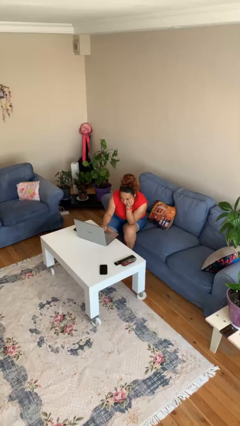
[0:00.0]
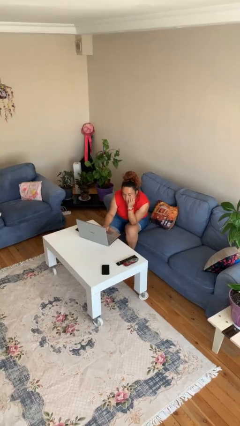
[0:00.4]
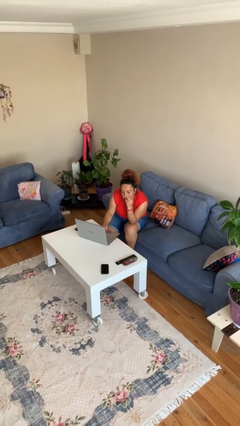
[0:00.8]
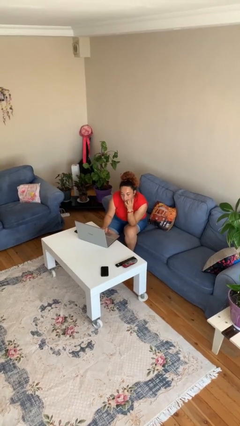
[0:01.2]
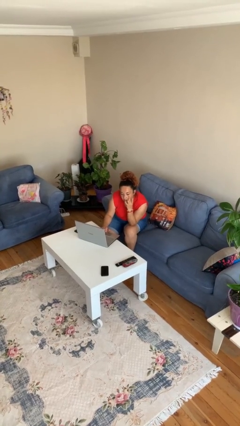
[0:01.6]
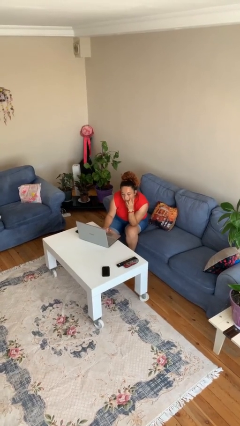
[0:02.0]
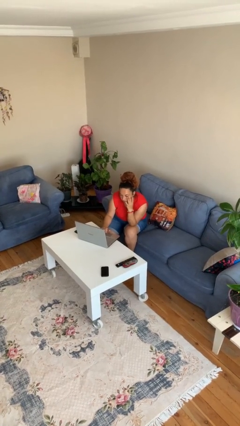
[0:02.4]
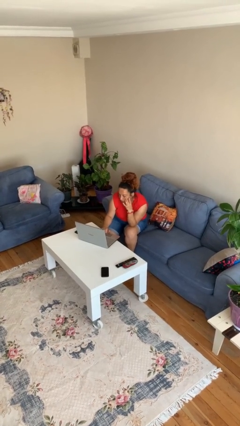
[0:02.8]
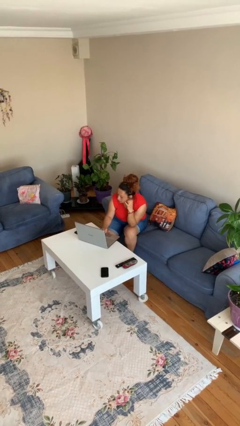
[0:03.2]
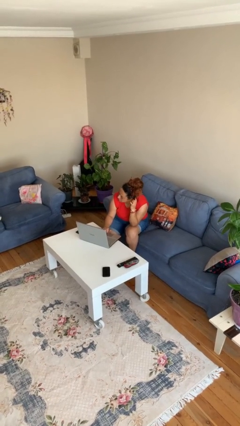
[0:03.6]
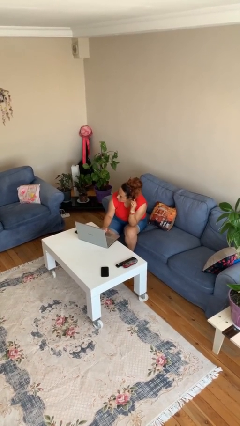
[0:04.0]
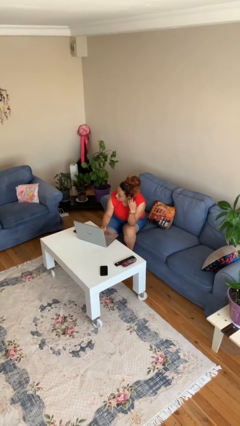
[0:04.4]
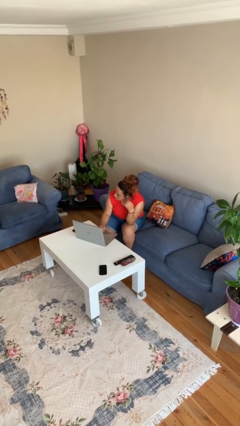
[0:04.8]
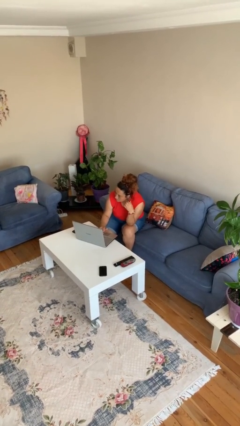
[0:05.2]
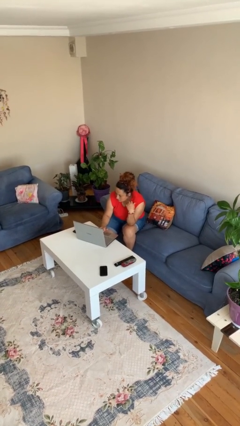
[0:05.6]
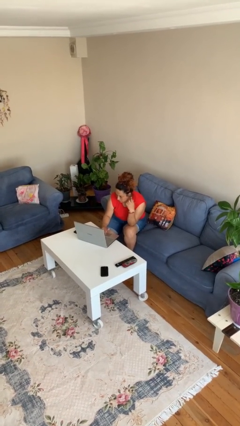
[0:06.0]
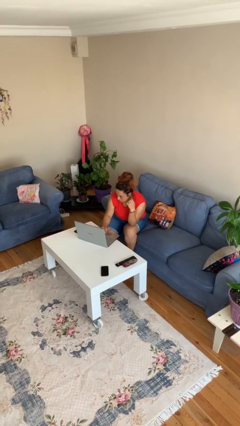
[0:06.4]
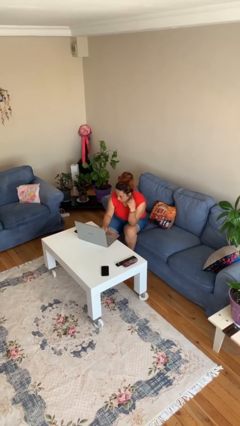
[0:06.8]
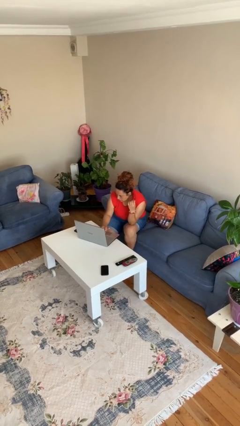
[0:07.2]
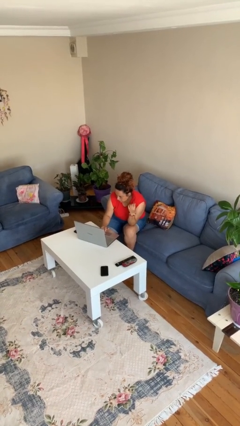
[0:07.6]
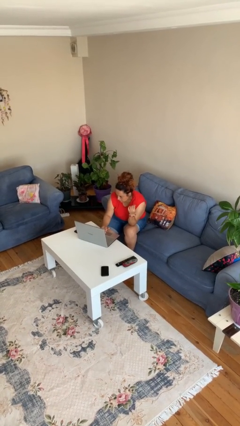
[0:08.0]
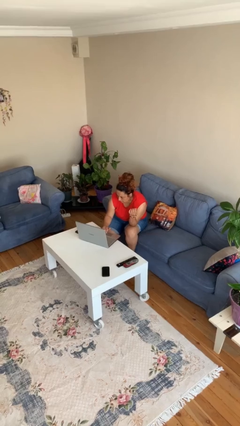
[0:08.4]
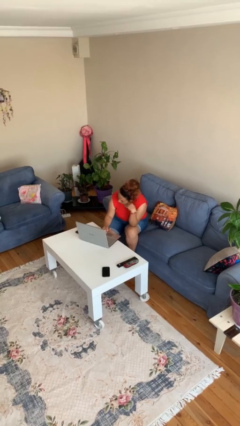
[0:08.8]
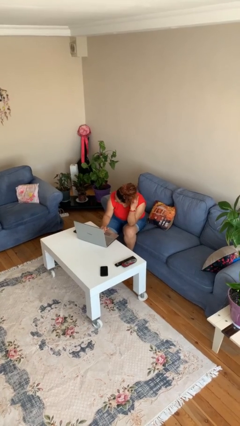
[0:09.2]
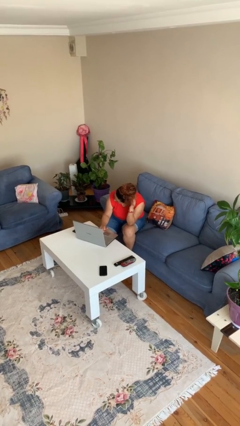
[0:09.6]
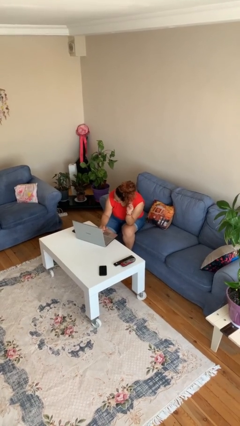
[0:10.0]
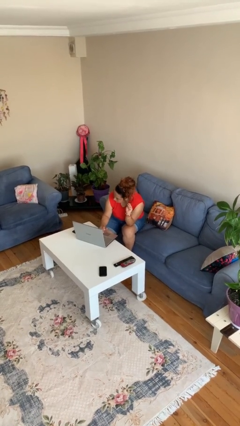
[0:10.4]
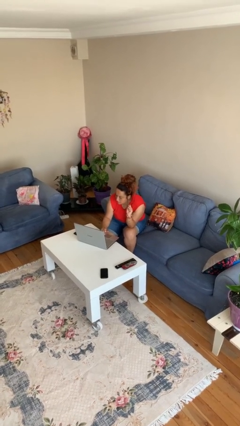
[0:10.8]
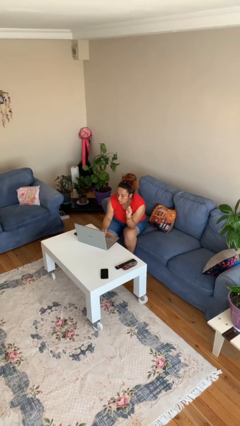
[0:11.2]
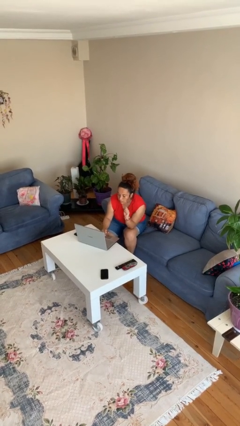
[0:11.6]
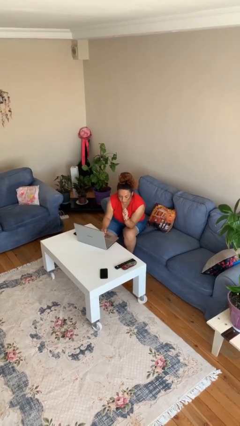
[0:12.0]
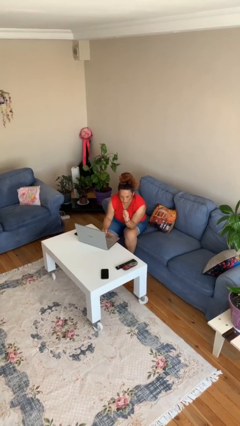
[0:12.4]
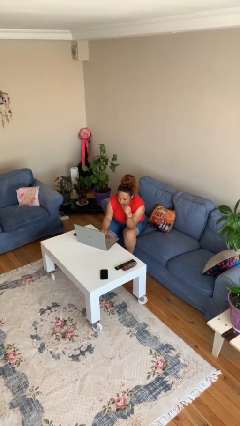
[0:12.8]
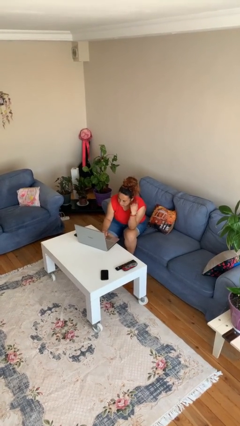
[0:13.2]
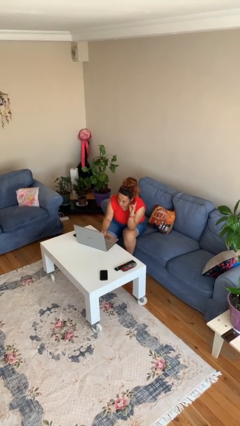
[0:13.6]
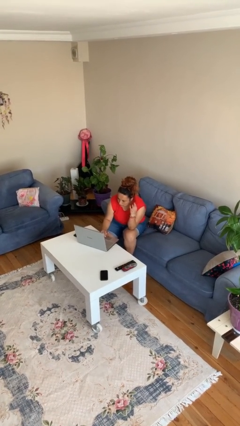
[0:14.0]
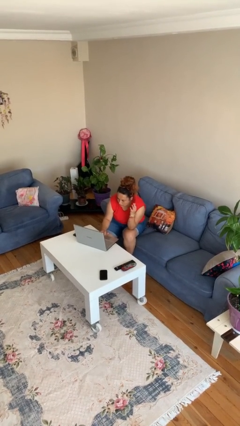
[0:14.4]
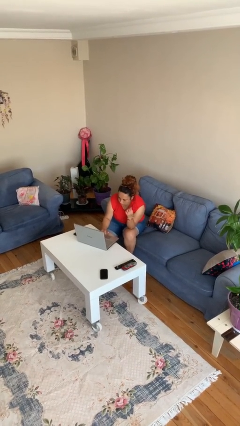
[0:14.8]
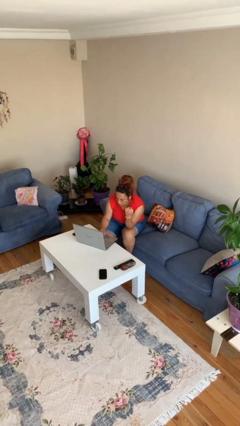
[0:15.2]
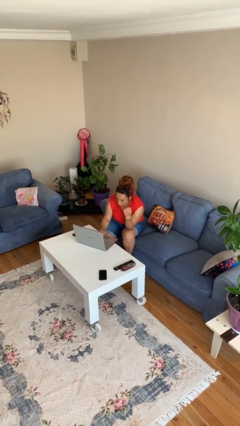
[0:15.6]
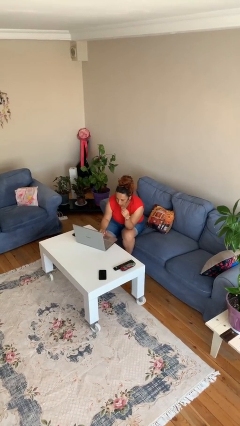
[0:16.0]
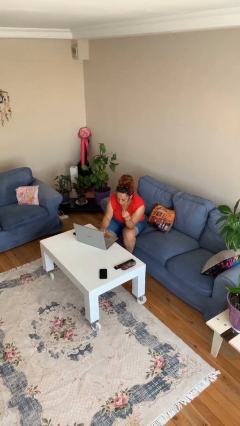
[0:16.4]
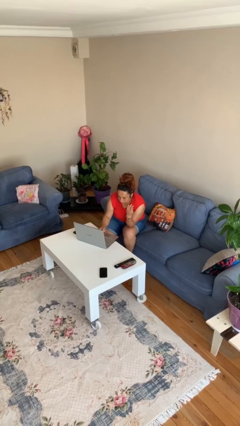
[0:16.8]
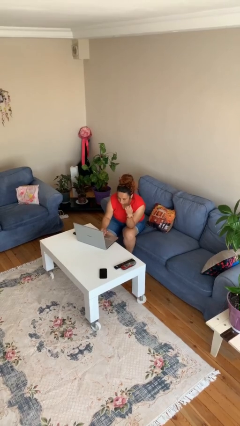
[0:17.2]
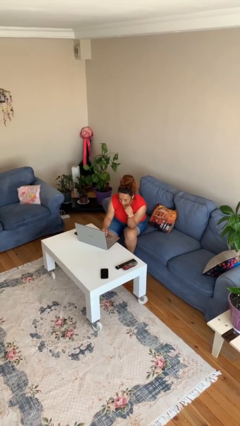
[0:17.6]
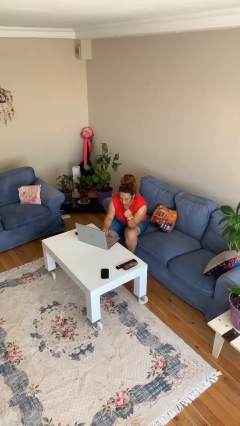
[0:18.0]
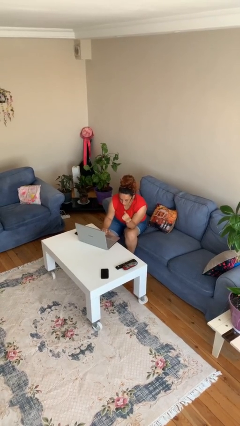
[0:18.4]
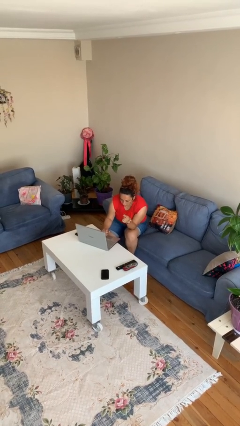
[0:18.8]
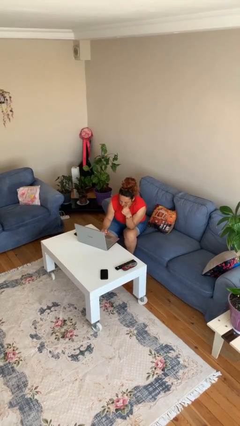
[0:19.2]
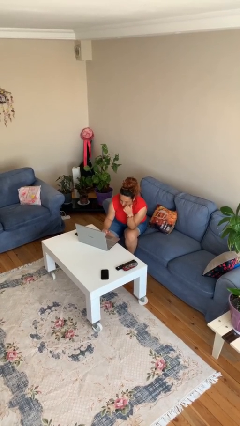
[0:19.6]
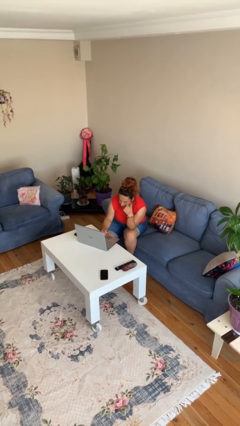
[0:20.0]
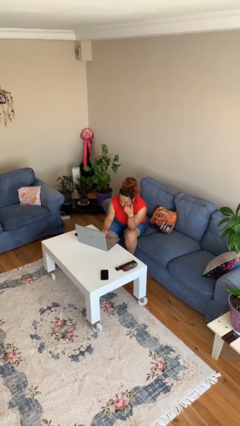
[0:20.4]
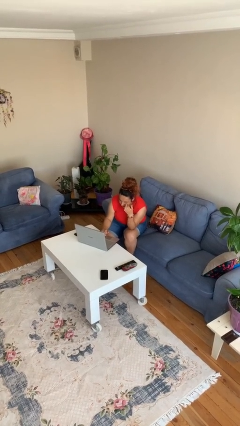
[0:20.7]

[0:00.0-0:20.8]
person interacts with laptop

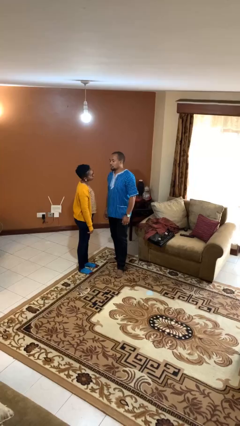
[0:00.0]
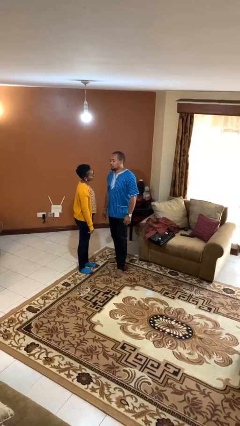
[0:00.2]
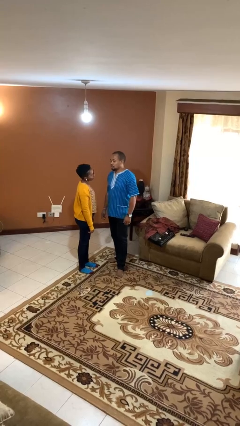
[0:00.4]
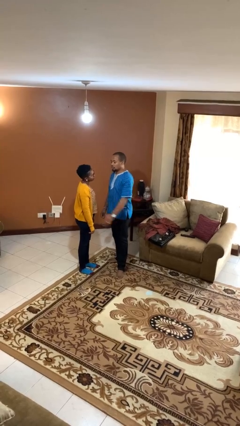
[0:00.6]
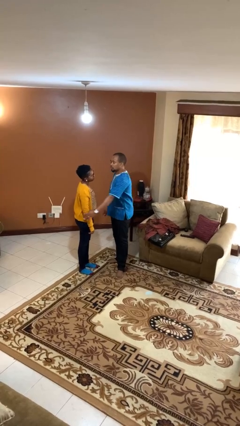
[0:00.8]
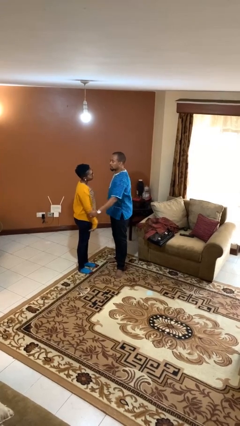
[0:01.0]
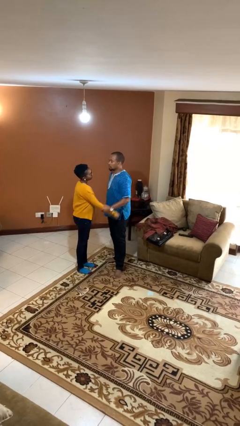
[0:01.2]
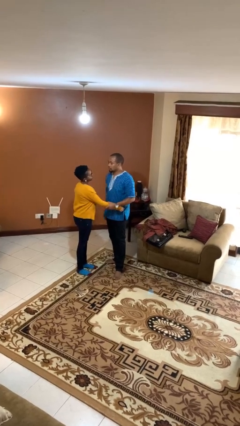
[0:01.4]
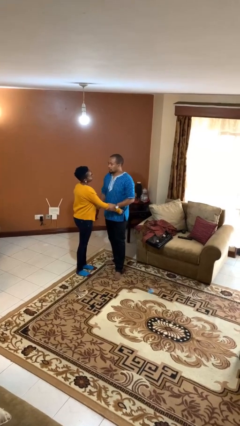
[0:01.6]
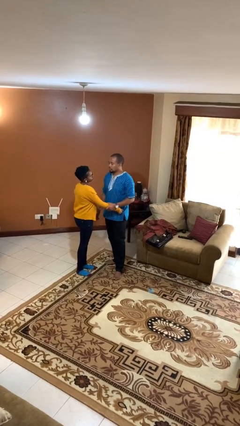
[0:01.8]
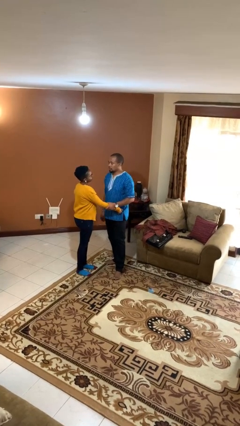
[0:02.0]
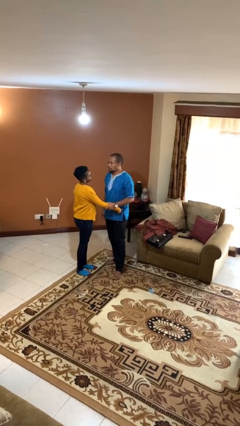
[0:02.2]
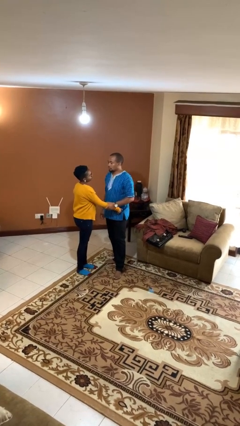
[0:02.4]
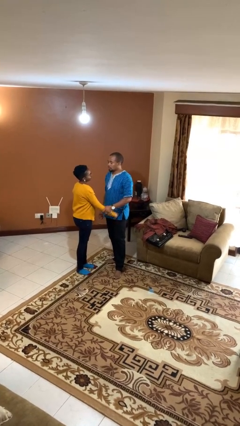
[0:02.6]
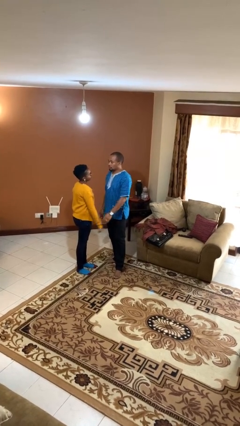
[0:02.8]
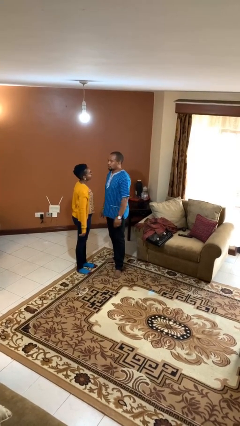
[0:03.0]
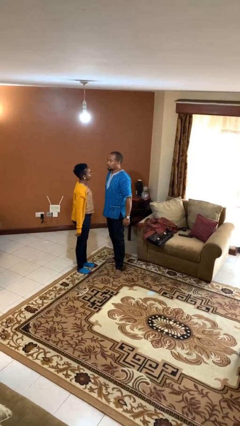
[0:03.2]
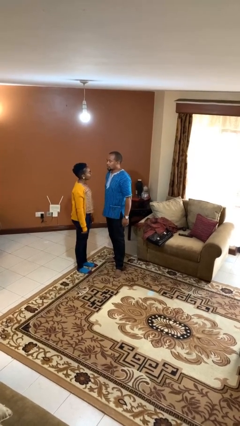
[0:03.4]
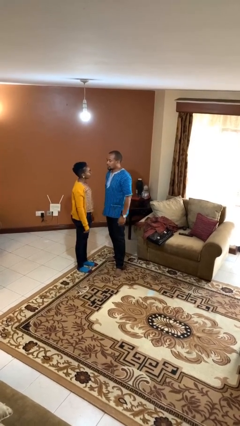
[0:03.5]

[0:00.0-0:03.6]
person grabs person by forearm

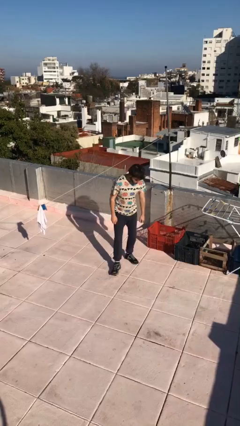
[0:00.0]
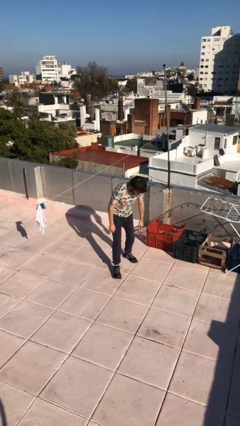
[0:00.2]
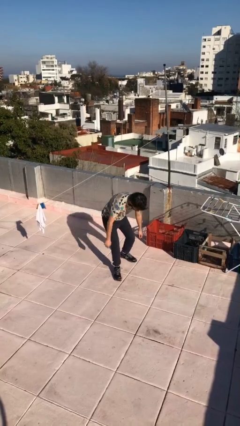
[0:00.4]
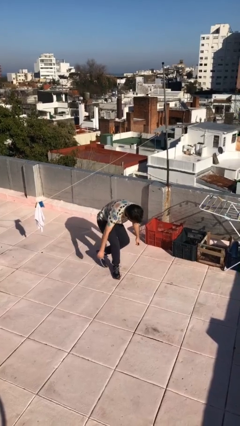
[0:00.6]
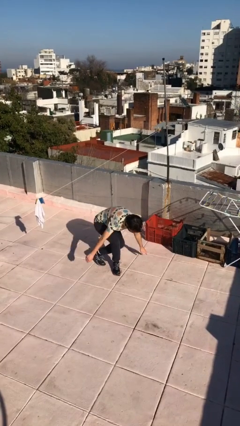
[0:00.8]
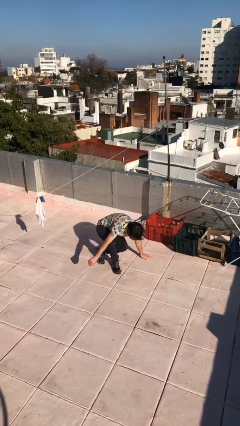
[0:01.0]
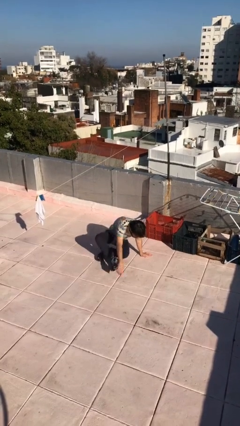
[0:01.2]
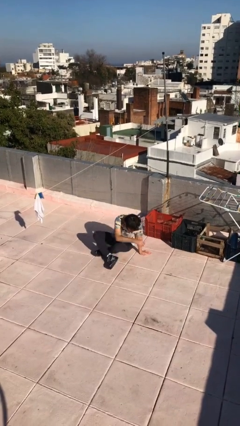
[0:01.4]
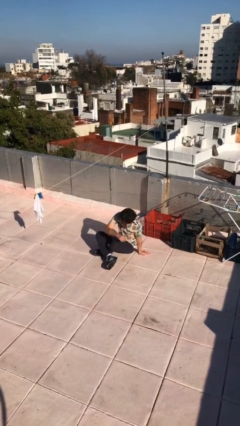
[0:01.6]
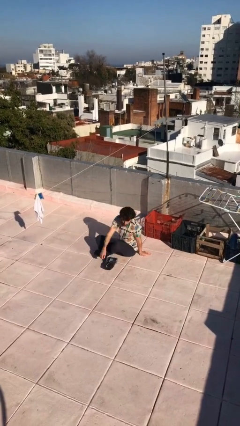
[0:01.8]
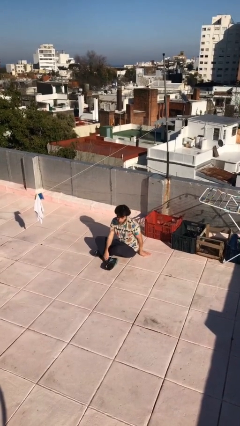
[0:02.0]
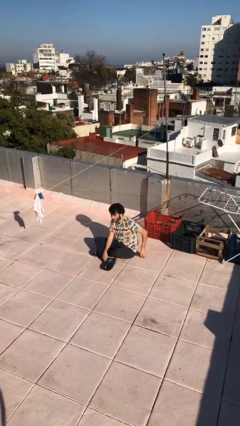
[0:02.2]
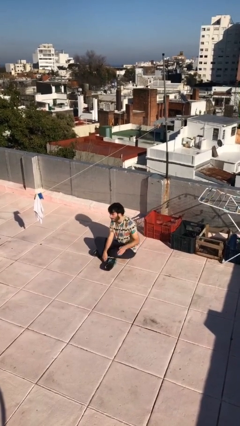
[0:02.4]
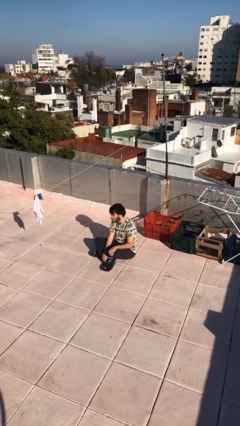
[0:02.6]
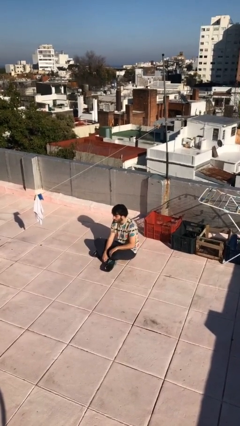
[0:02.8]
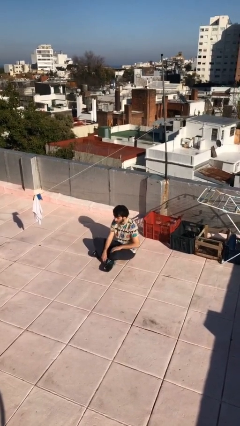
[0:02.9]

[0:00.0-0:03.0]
person sits crisscross

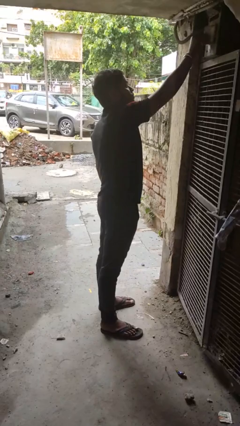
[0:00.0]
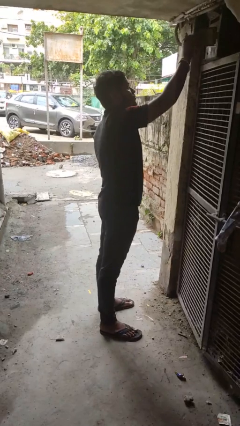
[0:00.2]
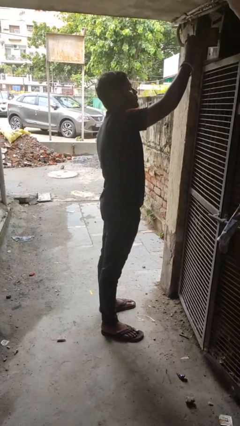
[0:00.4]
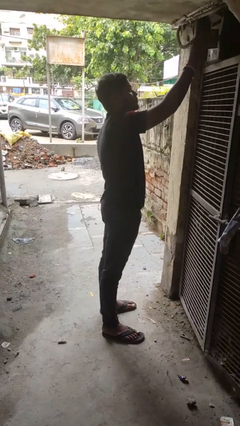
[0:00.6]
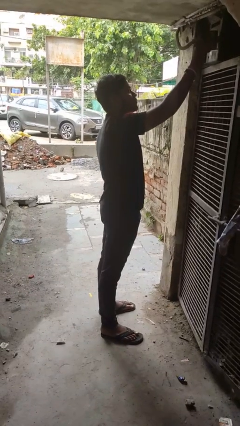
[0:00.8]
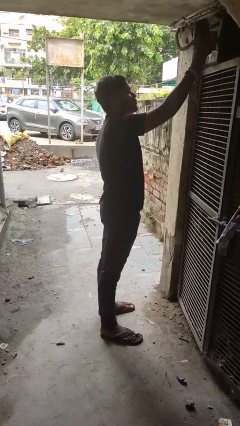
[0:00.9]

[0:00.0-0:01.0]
person opens mailbox
